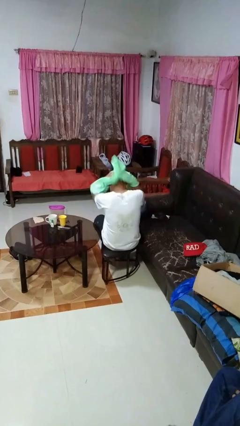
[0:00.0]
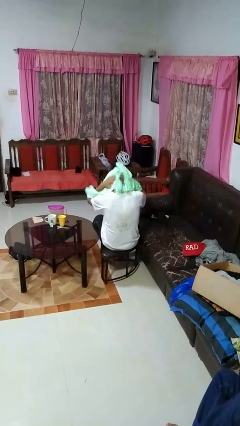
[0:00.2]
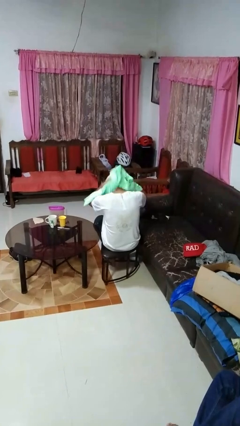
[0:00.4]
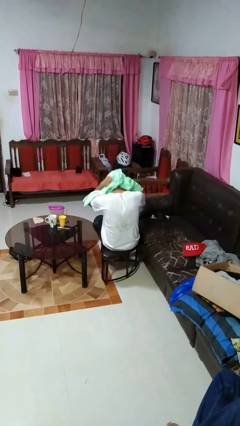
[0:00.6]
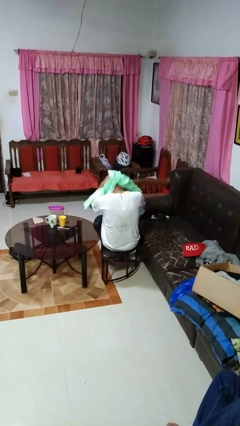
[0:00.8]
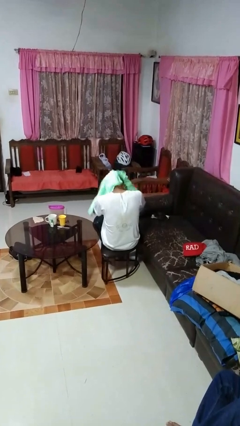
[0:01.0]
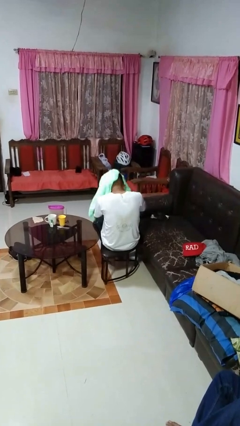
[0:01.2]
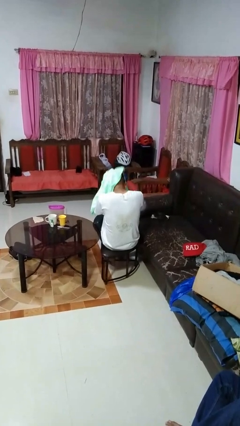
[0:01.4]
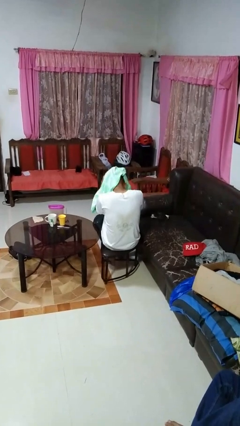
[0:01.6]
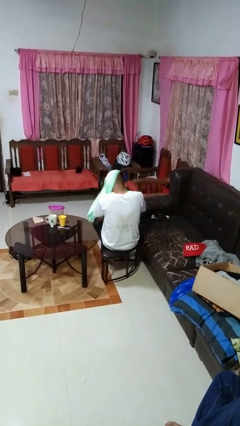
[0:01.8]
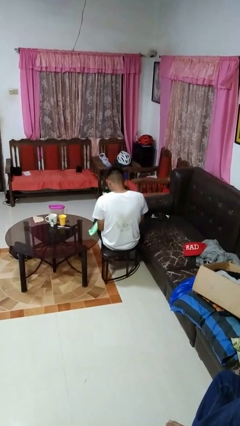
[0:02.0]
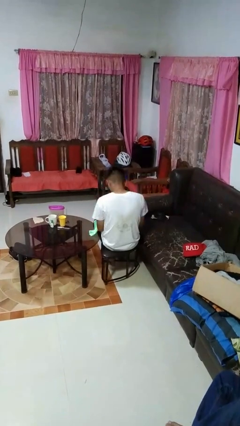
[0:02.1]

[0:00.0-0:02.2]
person dries hair with towel

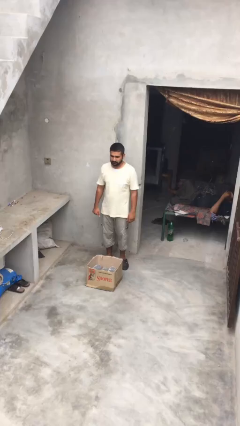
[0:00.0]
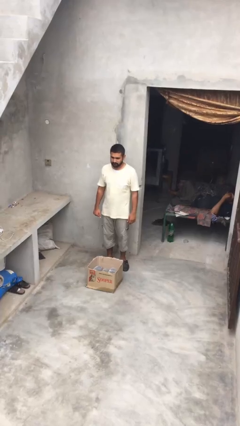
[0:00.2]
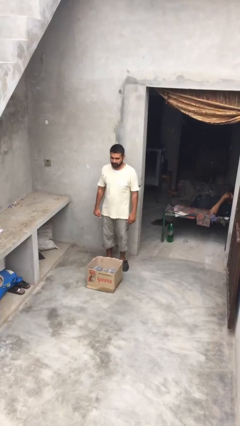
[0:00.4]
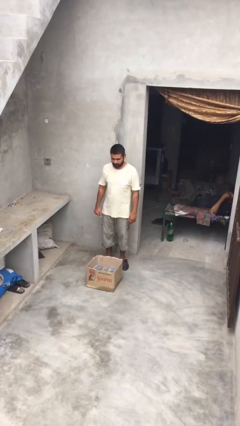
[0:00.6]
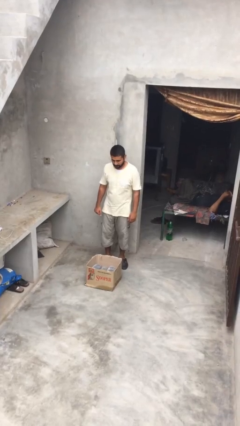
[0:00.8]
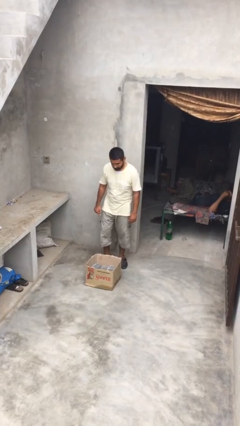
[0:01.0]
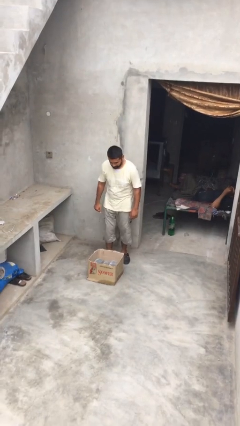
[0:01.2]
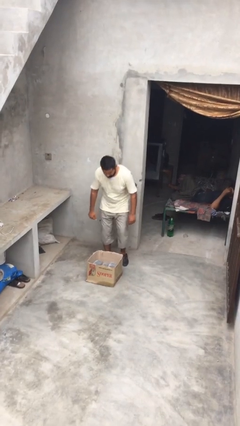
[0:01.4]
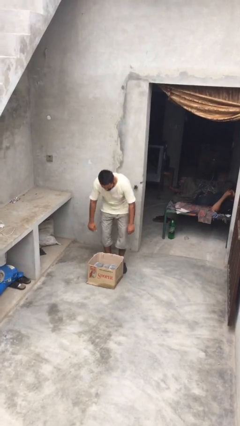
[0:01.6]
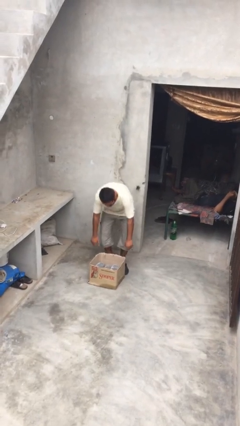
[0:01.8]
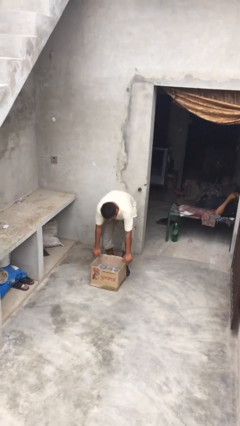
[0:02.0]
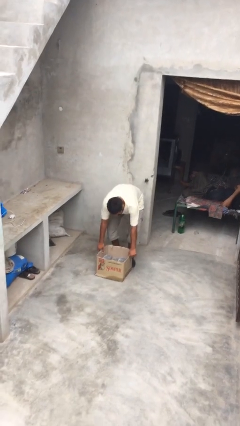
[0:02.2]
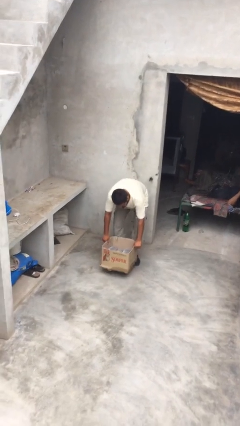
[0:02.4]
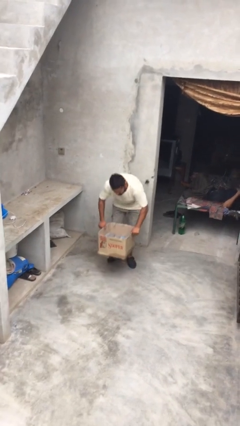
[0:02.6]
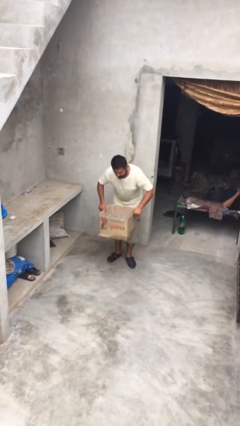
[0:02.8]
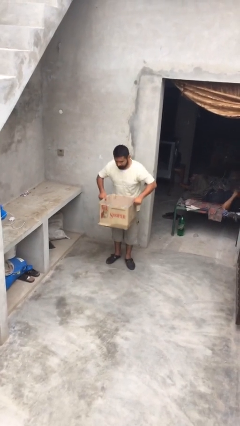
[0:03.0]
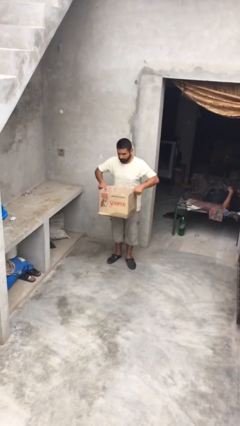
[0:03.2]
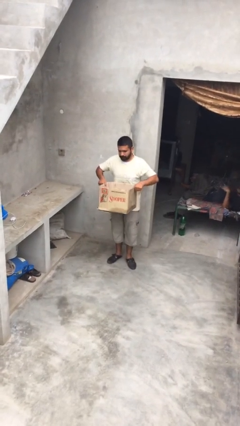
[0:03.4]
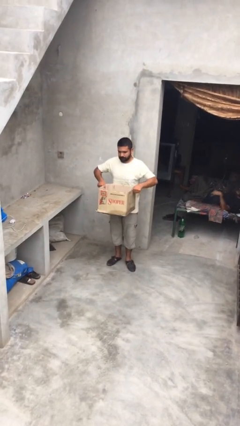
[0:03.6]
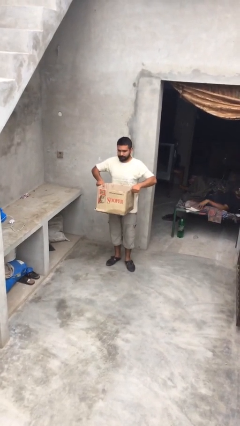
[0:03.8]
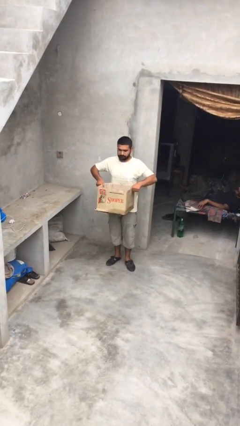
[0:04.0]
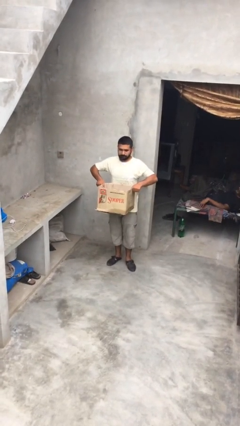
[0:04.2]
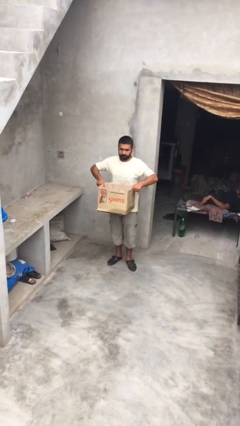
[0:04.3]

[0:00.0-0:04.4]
person picks up object from floor

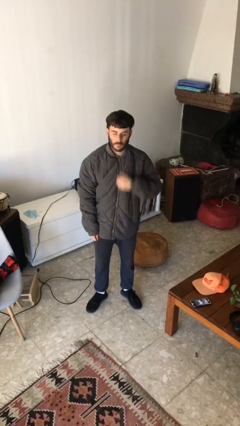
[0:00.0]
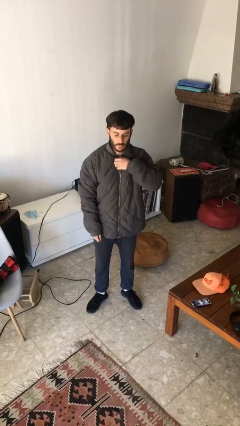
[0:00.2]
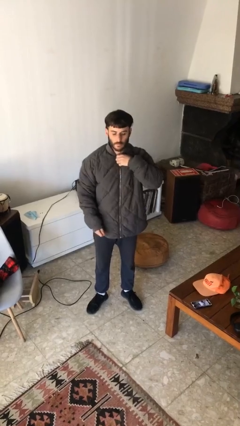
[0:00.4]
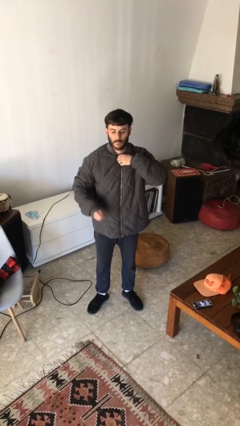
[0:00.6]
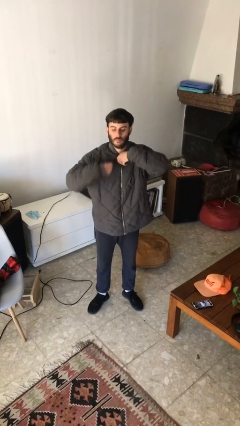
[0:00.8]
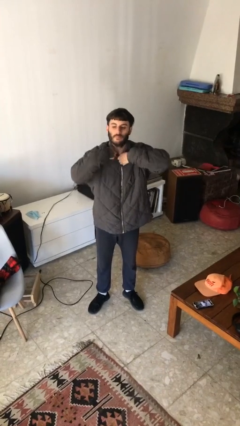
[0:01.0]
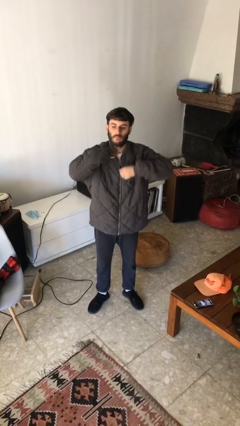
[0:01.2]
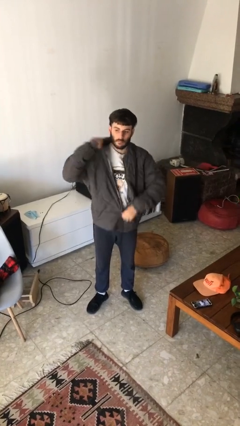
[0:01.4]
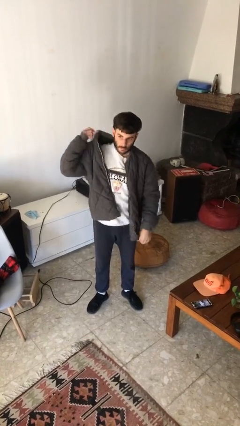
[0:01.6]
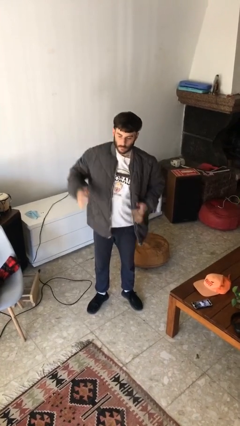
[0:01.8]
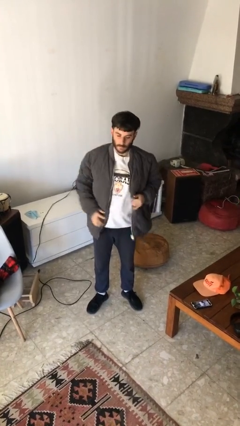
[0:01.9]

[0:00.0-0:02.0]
person unzips jacket

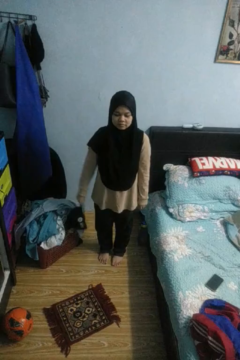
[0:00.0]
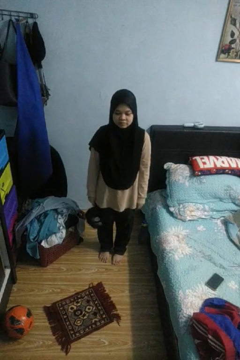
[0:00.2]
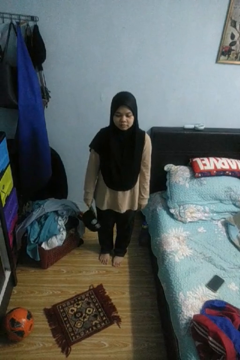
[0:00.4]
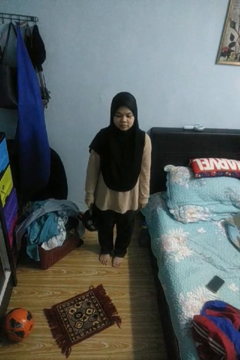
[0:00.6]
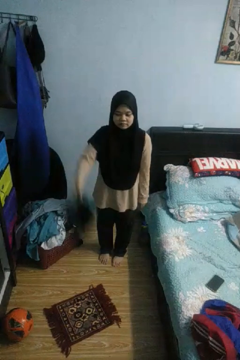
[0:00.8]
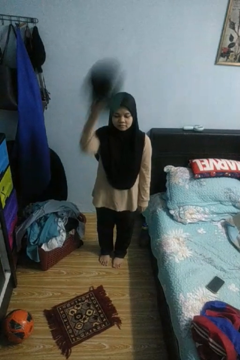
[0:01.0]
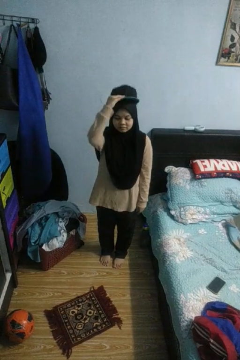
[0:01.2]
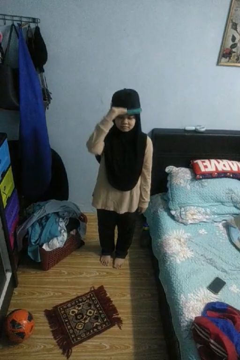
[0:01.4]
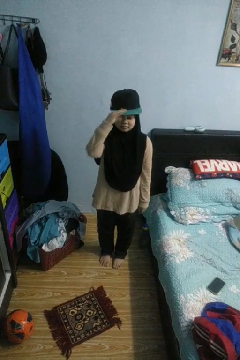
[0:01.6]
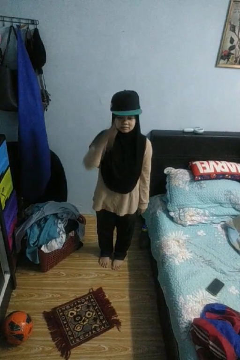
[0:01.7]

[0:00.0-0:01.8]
person puts on hat

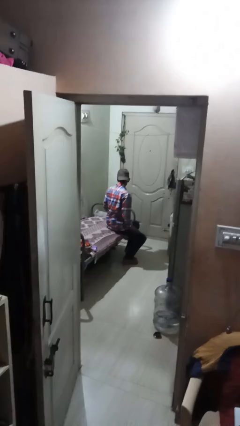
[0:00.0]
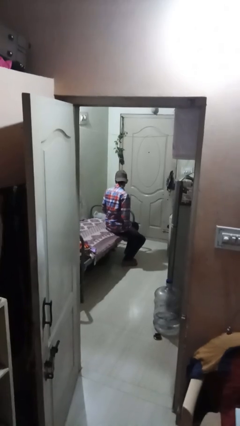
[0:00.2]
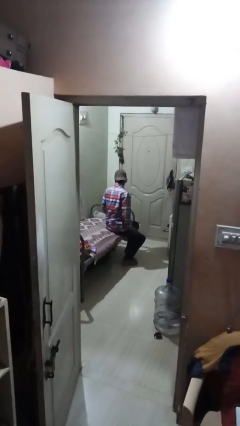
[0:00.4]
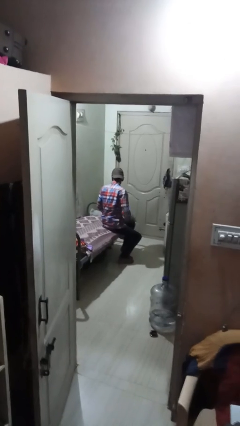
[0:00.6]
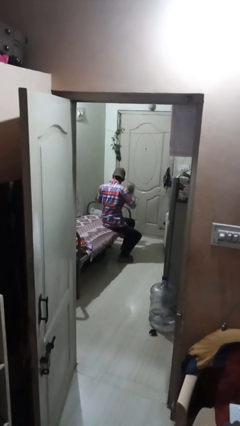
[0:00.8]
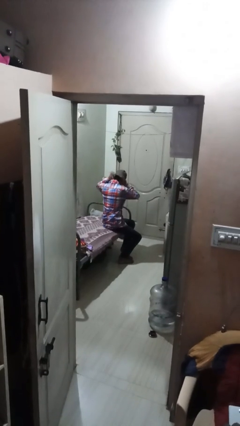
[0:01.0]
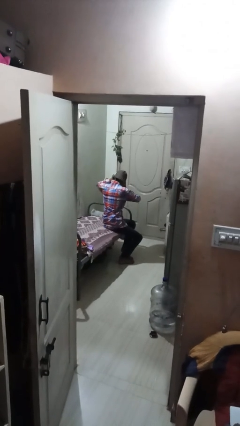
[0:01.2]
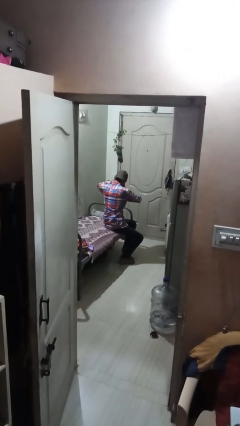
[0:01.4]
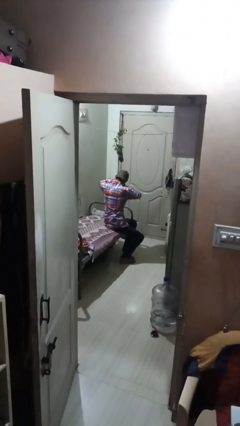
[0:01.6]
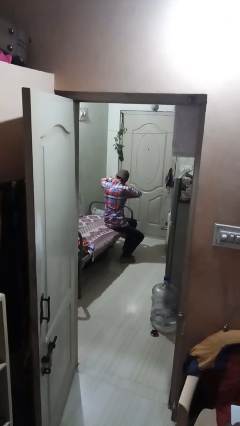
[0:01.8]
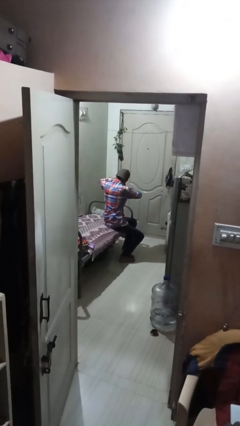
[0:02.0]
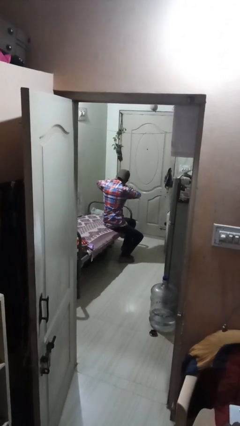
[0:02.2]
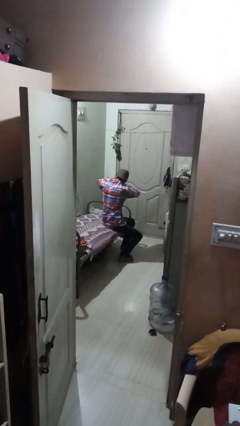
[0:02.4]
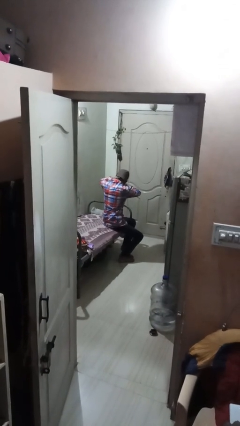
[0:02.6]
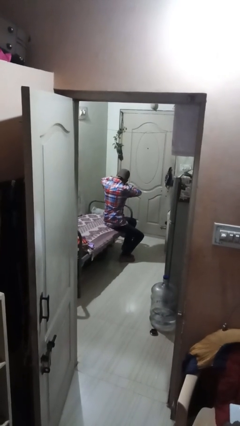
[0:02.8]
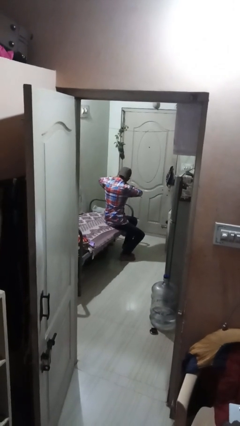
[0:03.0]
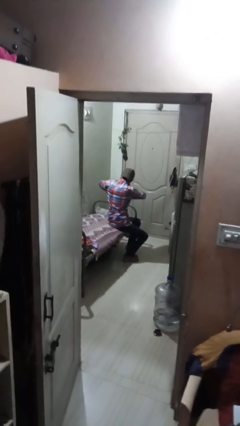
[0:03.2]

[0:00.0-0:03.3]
person rubs neck

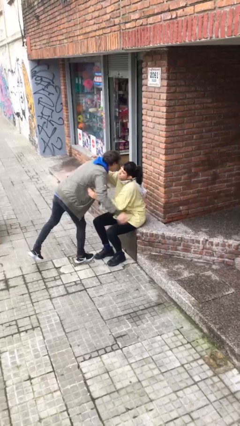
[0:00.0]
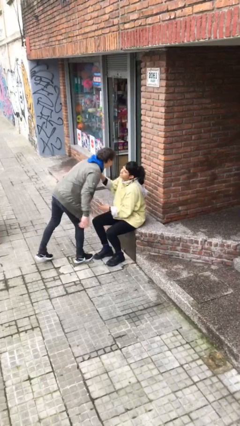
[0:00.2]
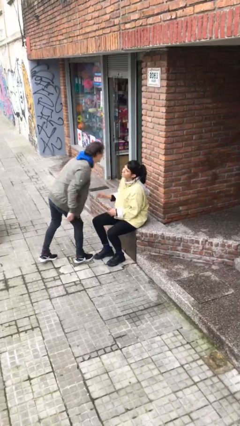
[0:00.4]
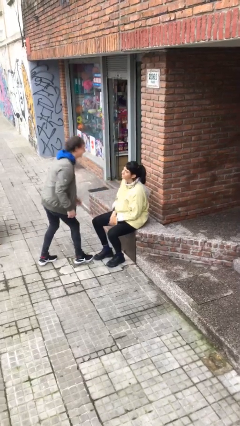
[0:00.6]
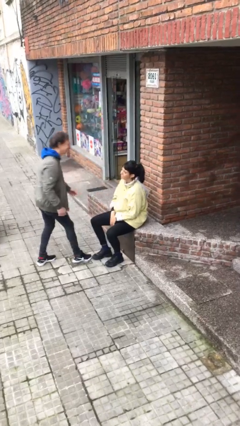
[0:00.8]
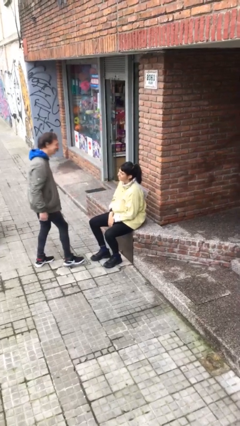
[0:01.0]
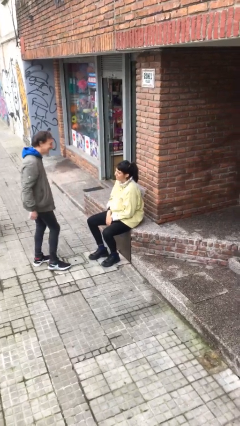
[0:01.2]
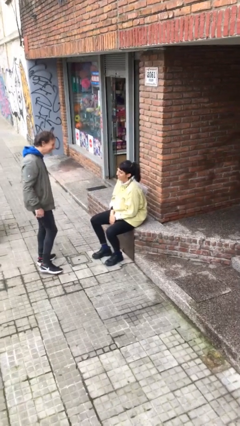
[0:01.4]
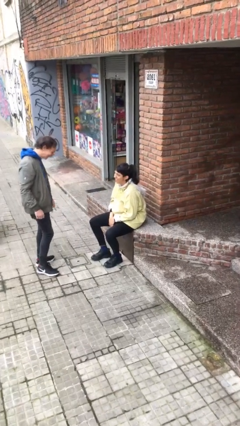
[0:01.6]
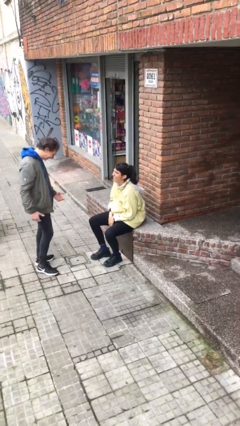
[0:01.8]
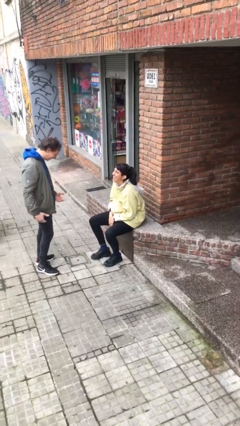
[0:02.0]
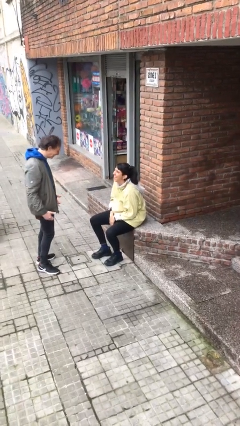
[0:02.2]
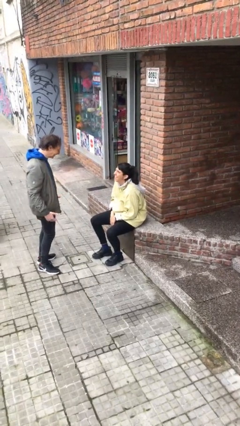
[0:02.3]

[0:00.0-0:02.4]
person talks to person

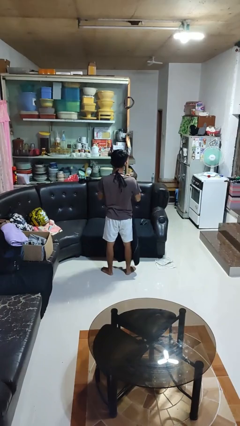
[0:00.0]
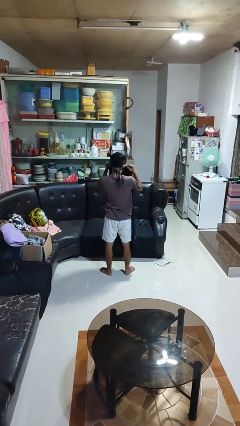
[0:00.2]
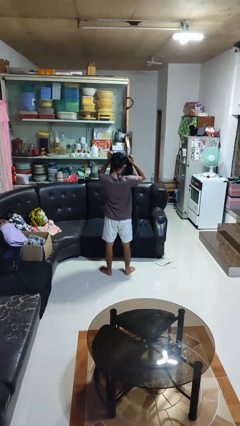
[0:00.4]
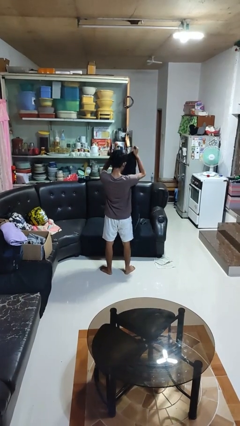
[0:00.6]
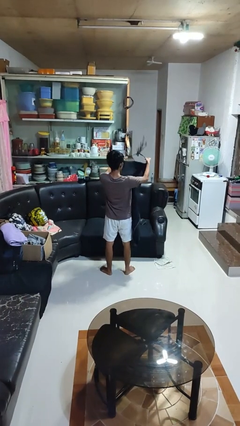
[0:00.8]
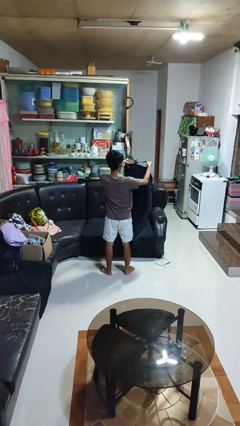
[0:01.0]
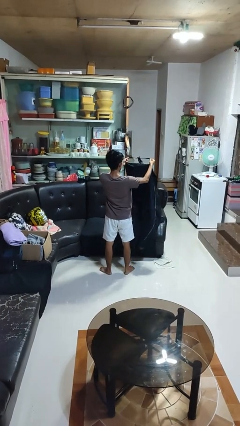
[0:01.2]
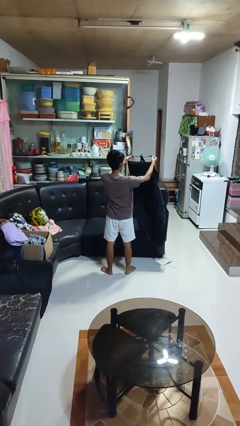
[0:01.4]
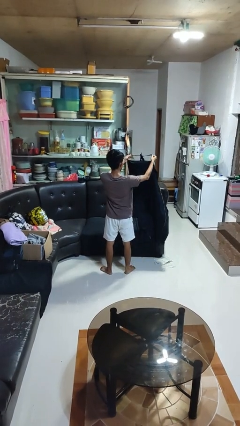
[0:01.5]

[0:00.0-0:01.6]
person takes off apron
